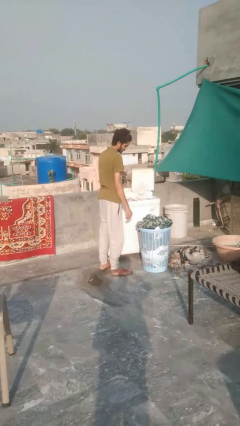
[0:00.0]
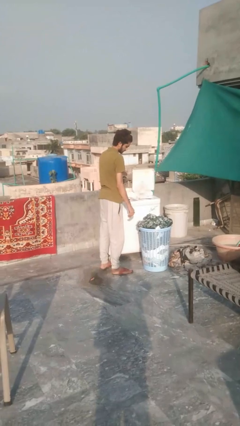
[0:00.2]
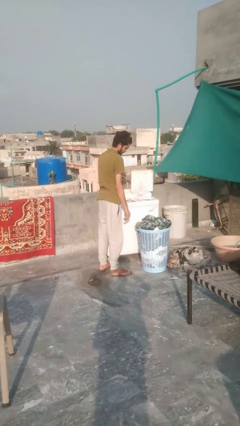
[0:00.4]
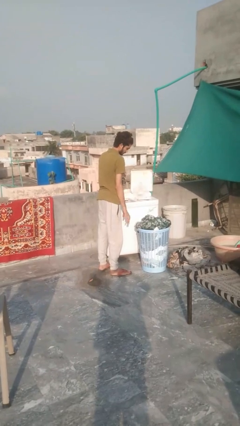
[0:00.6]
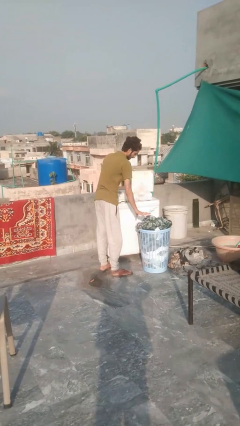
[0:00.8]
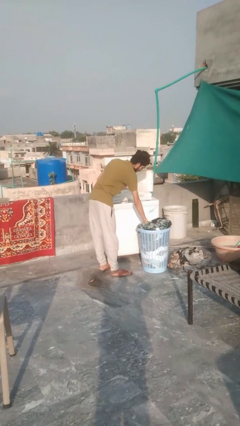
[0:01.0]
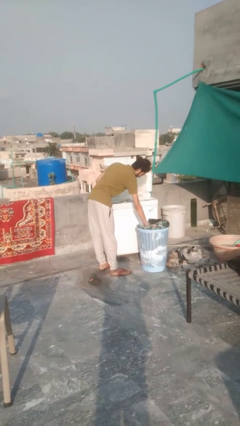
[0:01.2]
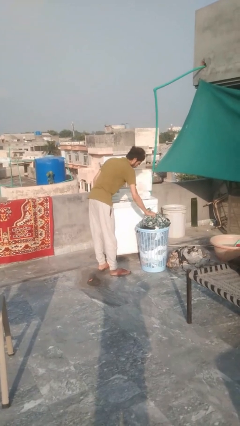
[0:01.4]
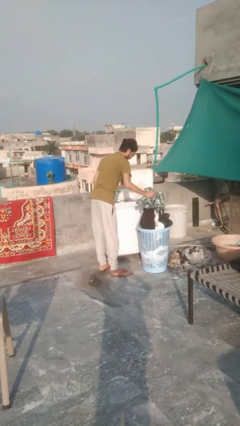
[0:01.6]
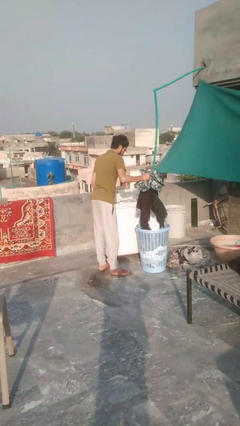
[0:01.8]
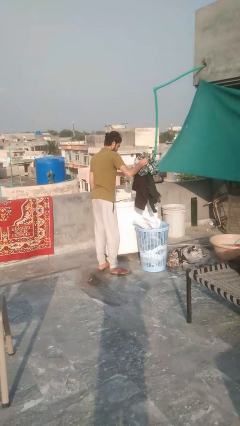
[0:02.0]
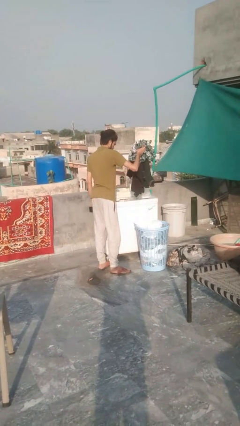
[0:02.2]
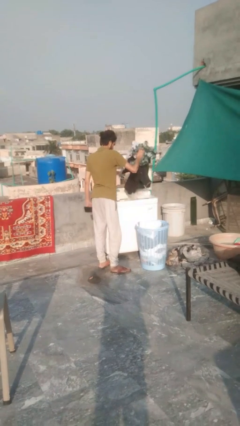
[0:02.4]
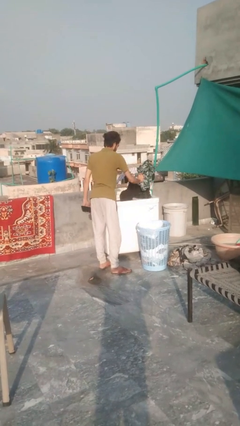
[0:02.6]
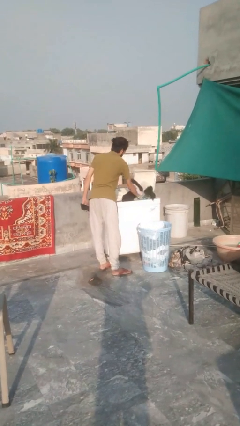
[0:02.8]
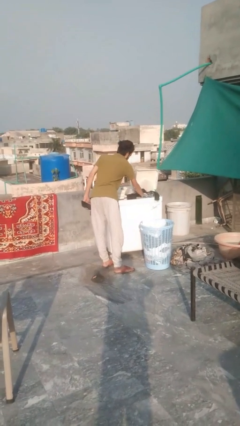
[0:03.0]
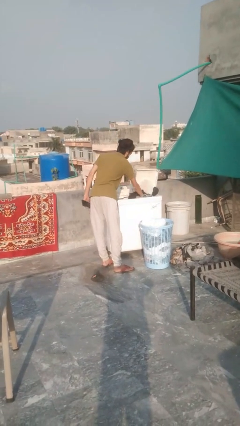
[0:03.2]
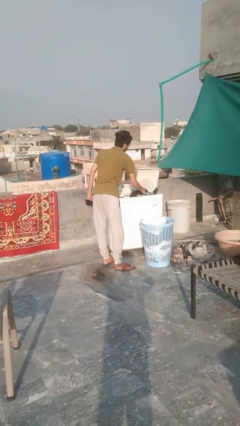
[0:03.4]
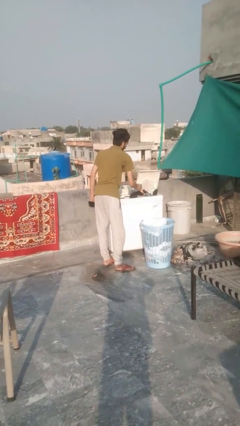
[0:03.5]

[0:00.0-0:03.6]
person loads clotheswasher

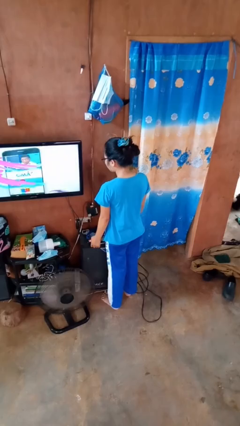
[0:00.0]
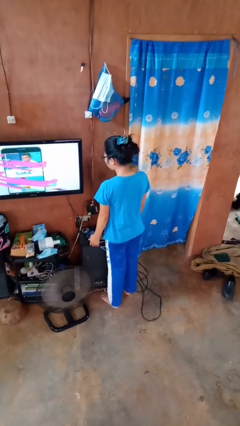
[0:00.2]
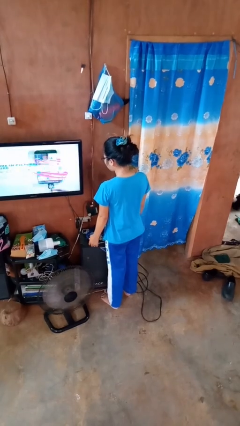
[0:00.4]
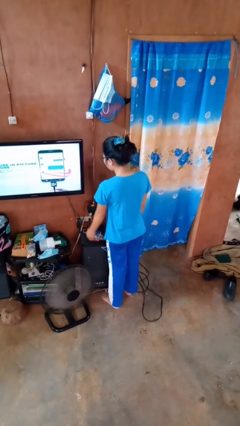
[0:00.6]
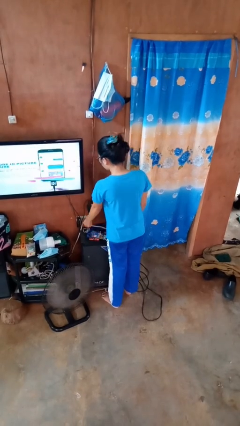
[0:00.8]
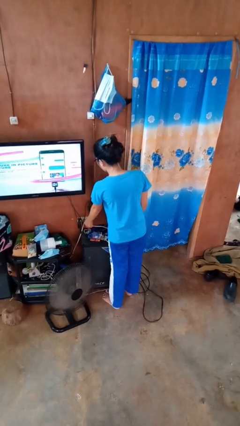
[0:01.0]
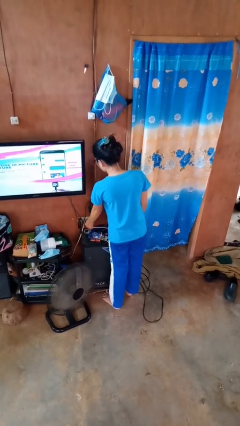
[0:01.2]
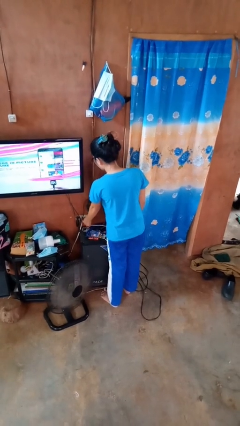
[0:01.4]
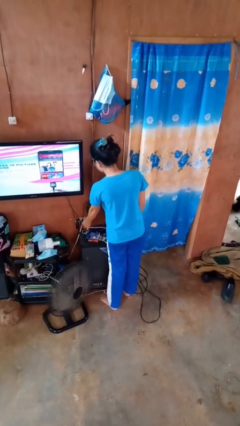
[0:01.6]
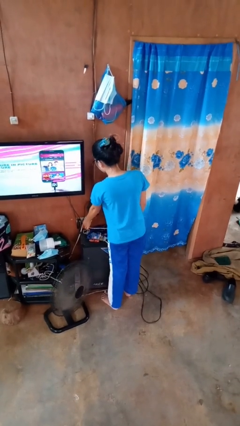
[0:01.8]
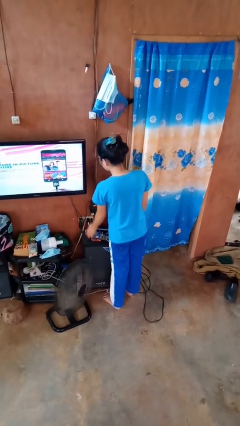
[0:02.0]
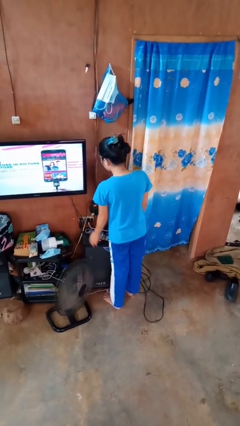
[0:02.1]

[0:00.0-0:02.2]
person plugs into electrical socket

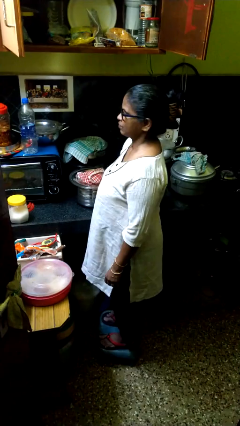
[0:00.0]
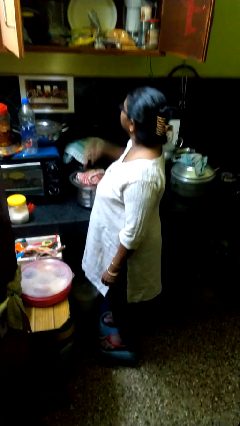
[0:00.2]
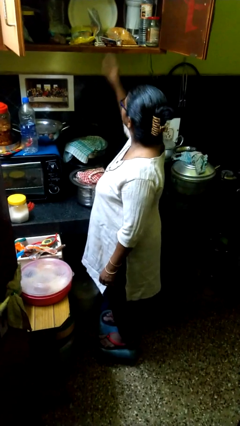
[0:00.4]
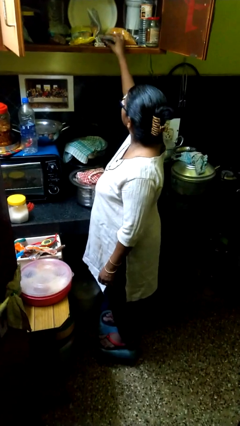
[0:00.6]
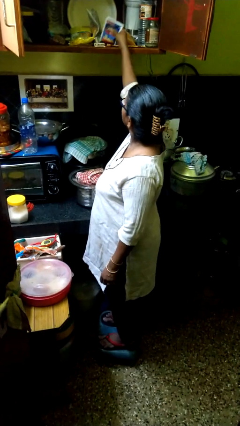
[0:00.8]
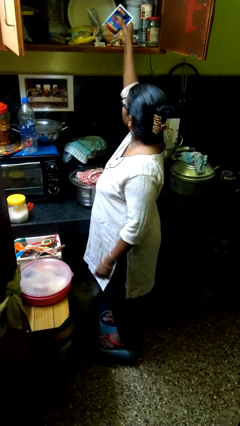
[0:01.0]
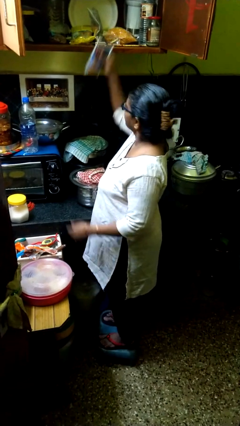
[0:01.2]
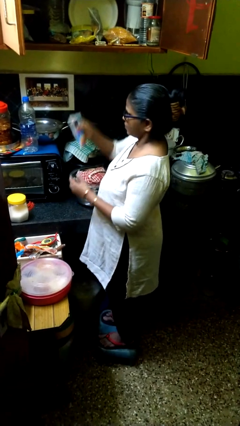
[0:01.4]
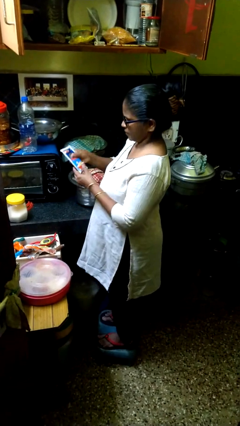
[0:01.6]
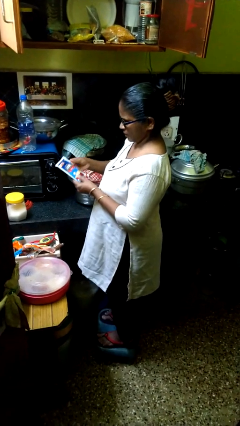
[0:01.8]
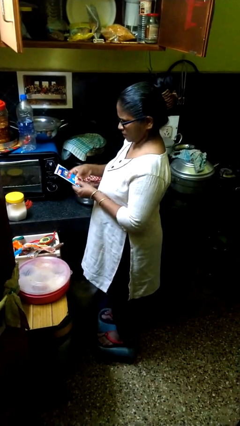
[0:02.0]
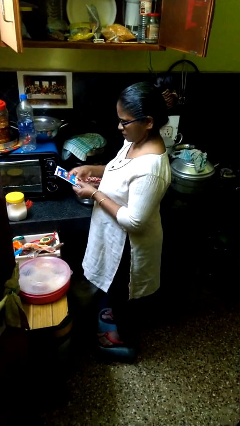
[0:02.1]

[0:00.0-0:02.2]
person takes object from cabinet

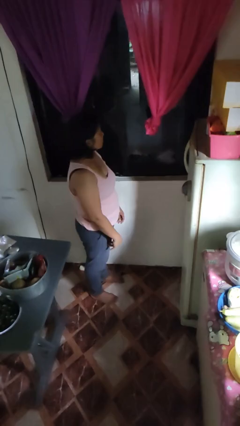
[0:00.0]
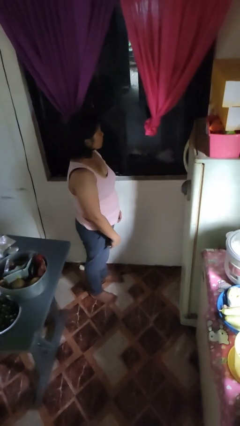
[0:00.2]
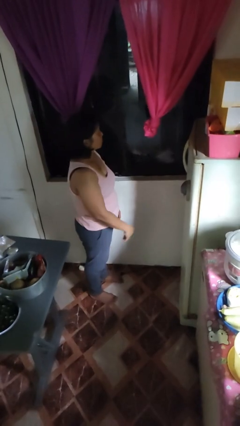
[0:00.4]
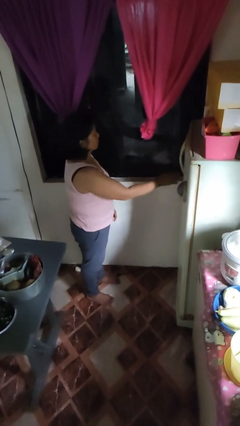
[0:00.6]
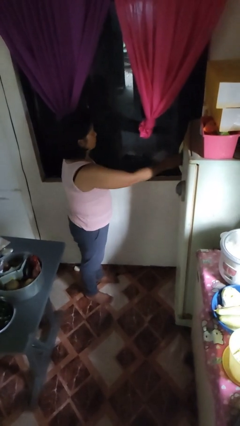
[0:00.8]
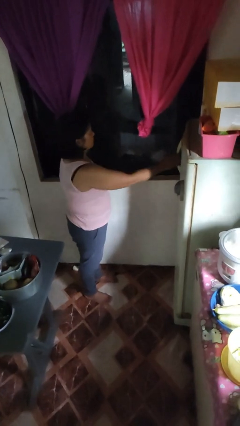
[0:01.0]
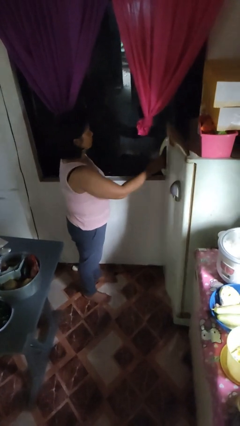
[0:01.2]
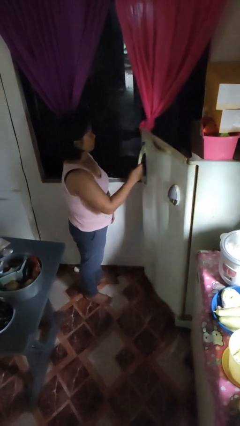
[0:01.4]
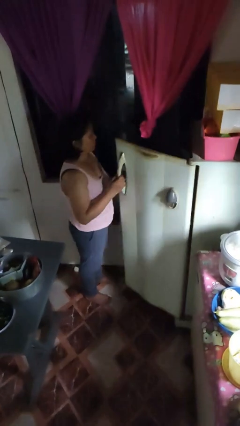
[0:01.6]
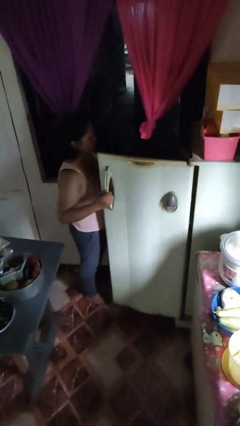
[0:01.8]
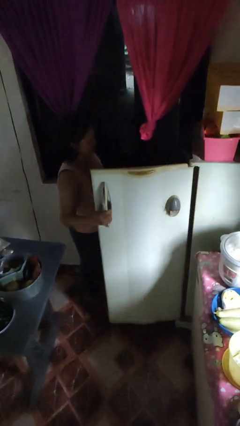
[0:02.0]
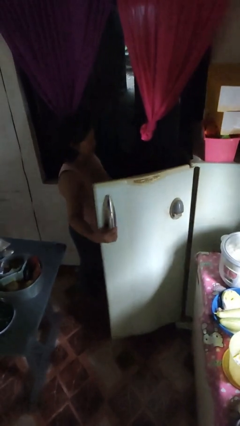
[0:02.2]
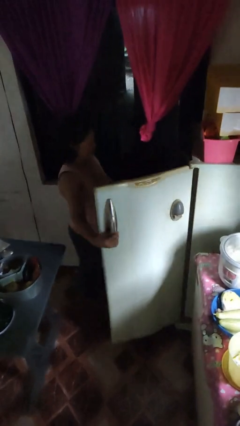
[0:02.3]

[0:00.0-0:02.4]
person opens refrigerator

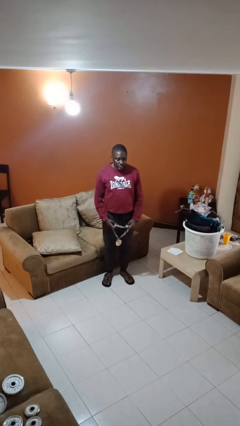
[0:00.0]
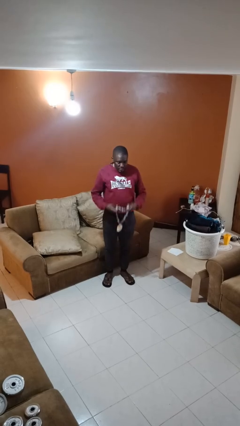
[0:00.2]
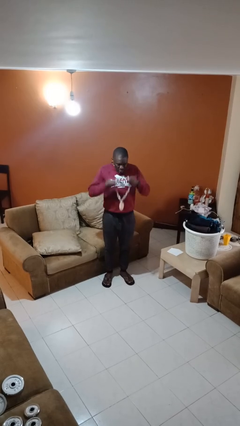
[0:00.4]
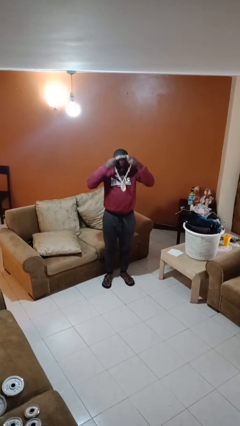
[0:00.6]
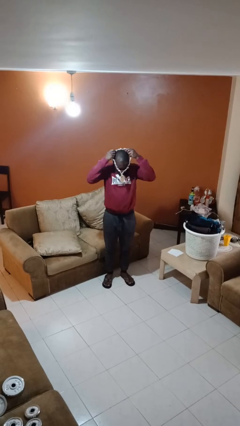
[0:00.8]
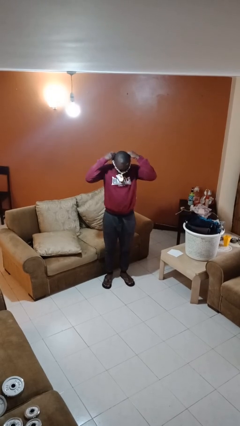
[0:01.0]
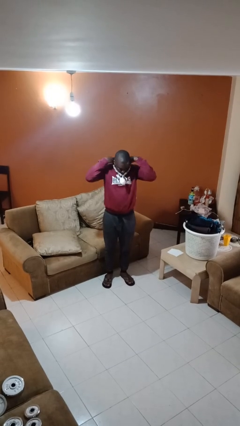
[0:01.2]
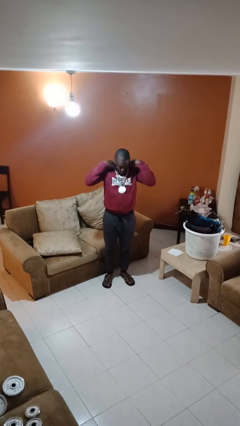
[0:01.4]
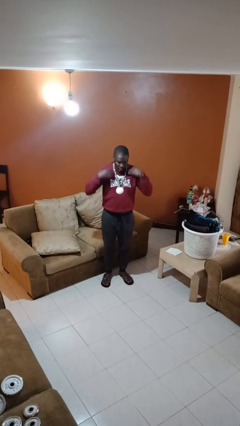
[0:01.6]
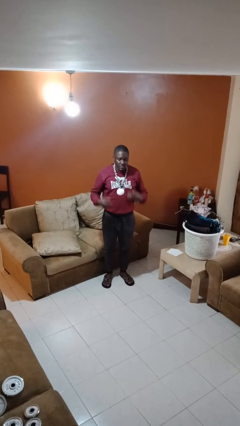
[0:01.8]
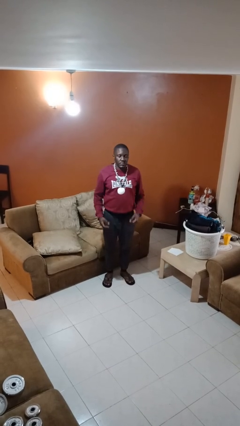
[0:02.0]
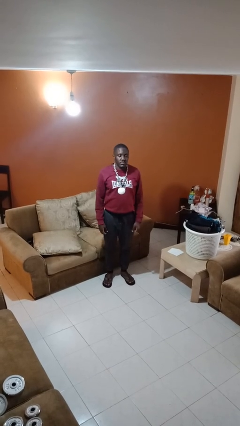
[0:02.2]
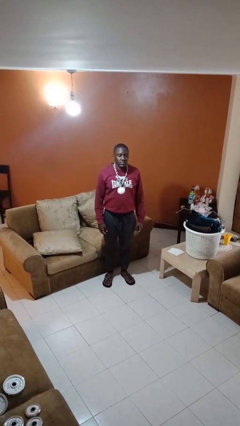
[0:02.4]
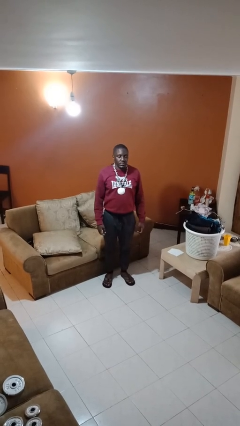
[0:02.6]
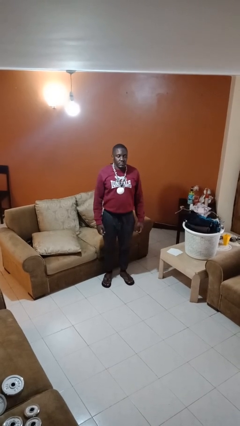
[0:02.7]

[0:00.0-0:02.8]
person puts on necklace

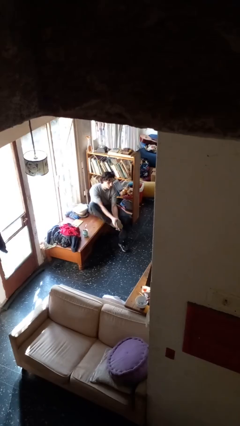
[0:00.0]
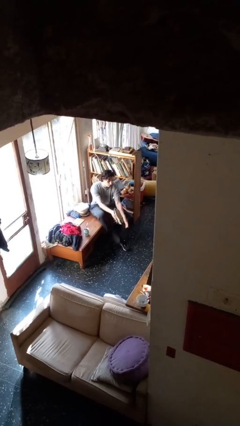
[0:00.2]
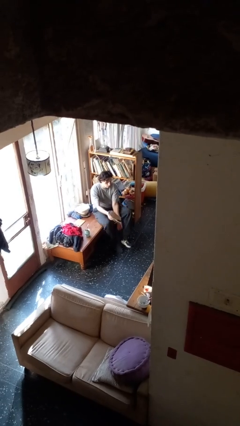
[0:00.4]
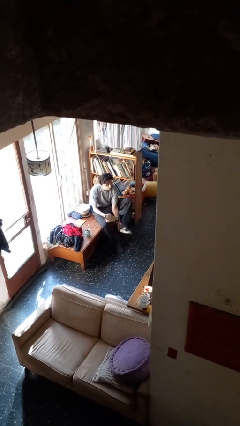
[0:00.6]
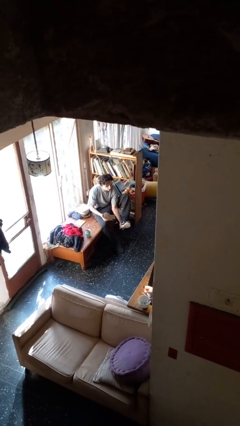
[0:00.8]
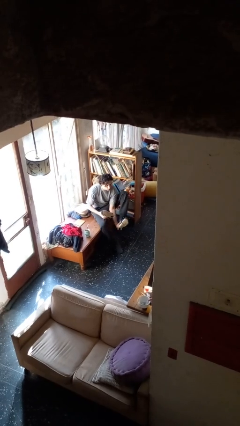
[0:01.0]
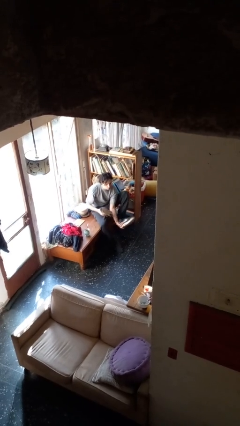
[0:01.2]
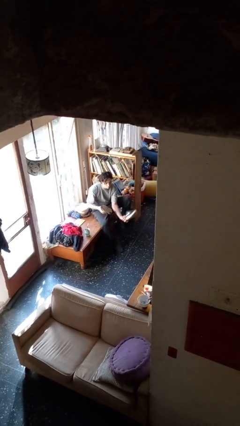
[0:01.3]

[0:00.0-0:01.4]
person takes off shoes

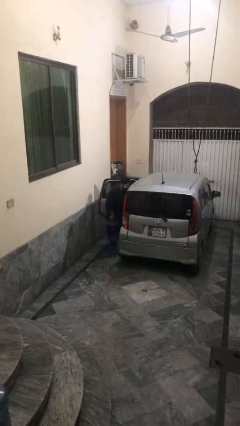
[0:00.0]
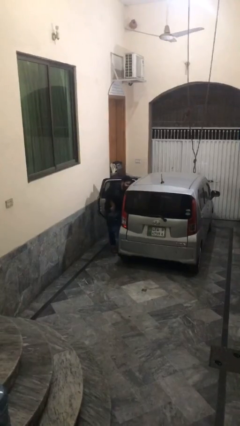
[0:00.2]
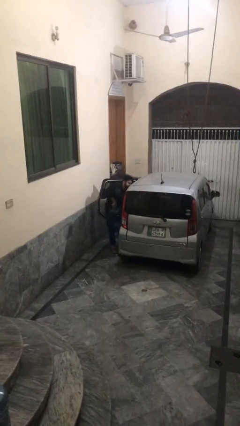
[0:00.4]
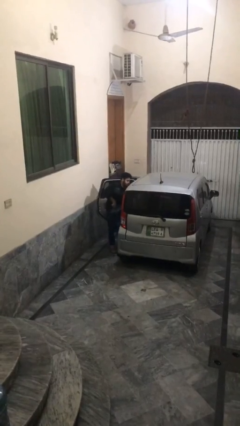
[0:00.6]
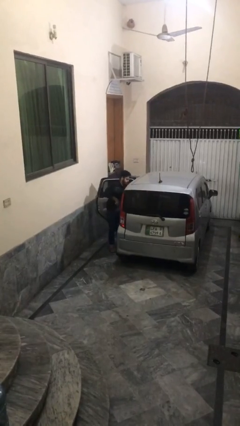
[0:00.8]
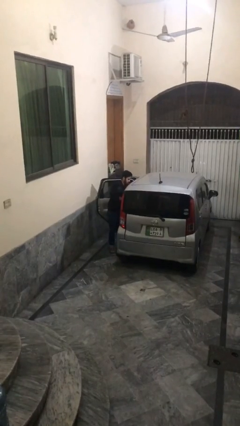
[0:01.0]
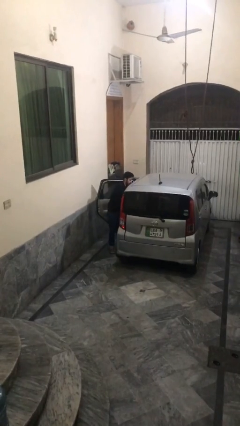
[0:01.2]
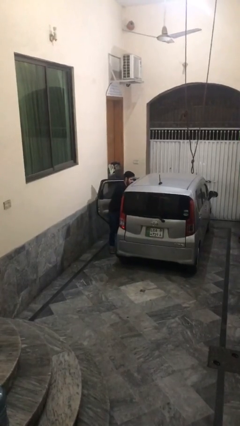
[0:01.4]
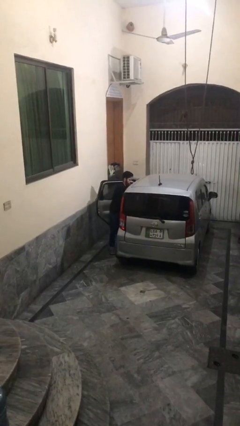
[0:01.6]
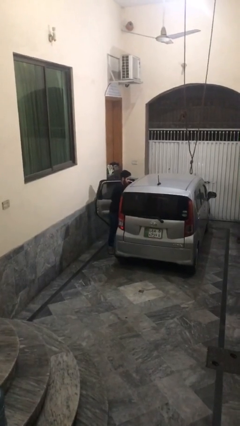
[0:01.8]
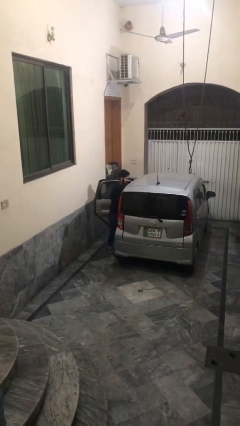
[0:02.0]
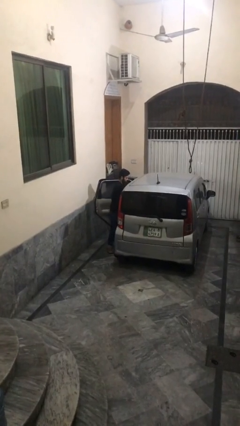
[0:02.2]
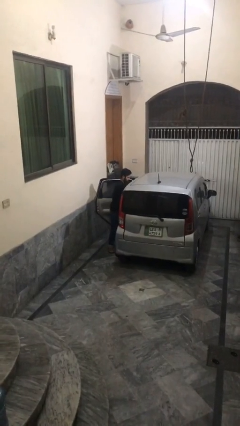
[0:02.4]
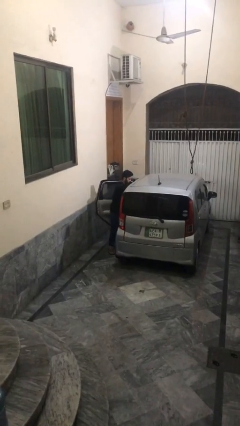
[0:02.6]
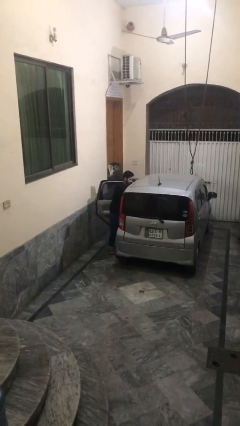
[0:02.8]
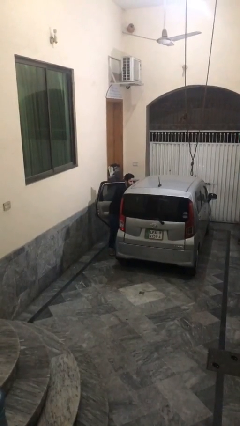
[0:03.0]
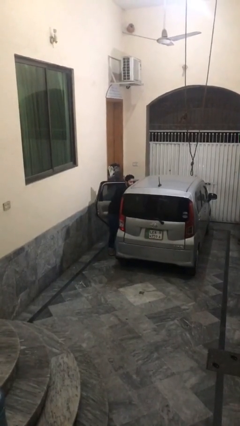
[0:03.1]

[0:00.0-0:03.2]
person loads car
